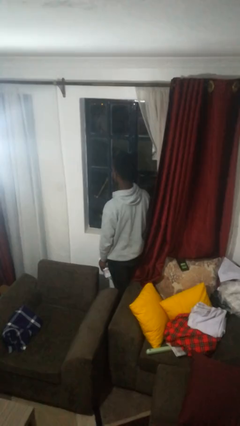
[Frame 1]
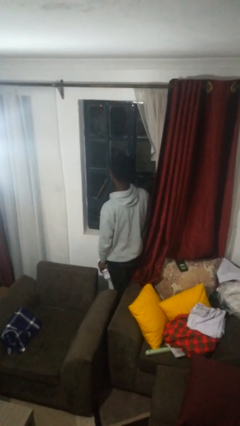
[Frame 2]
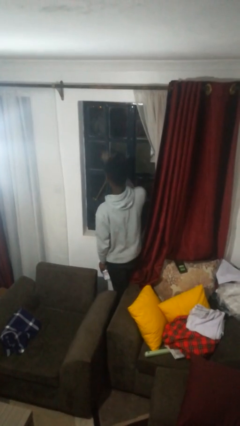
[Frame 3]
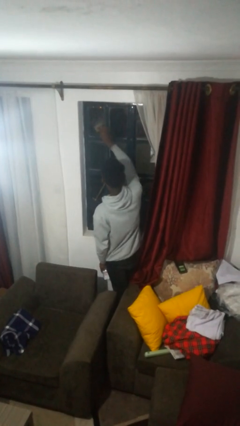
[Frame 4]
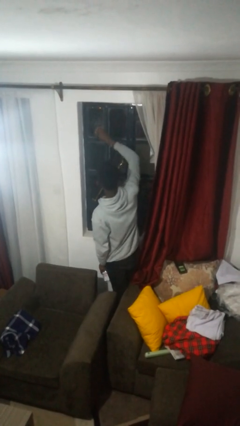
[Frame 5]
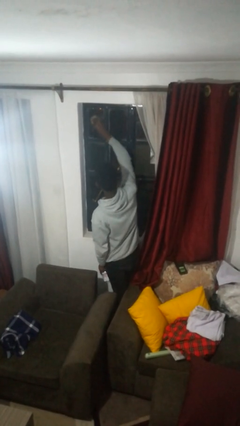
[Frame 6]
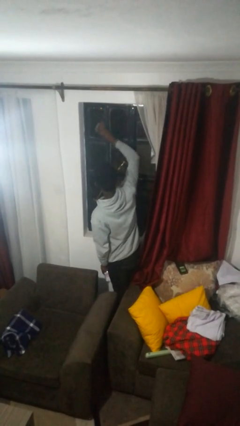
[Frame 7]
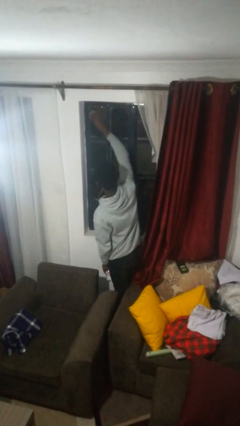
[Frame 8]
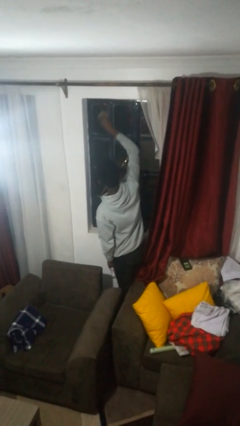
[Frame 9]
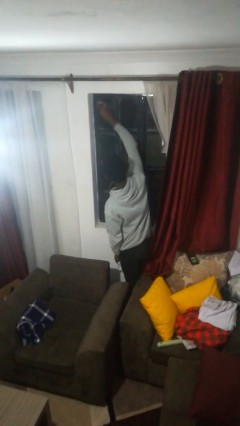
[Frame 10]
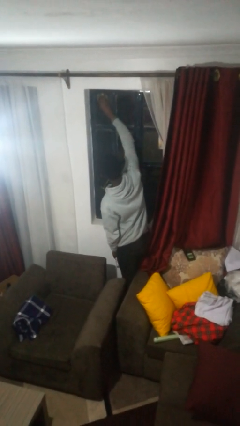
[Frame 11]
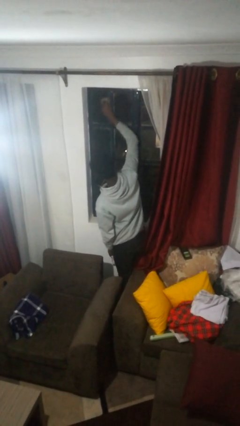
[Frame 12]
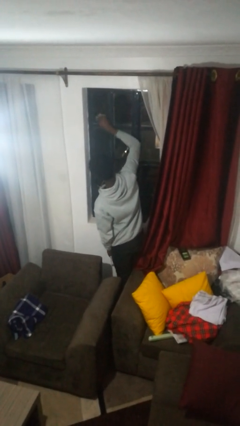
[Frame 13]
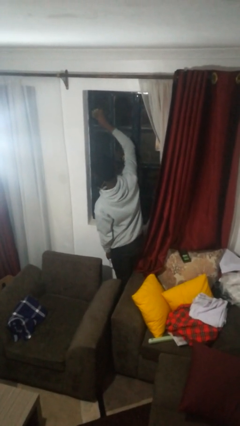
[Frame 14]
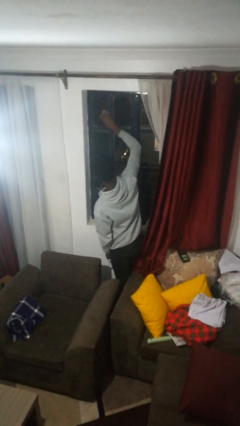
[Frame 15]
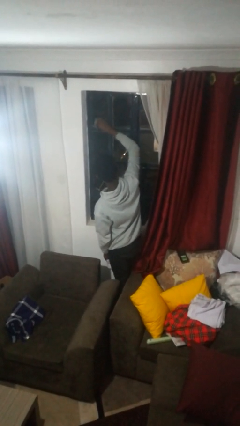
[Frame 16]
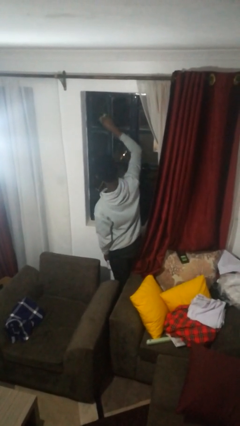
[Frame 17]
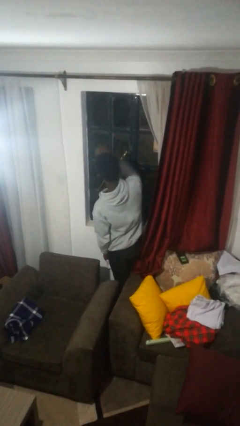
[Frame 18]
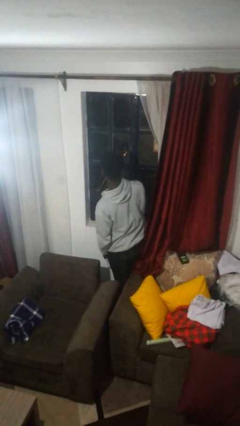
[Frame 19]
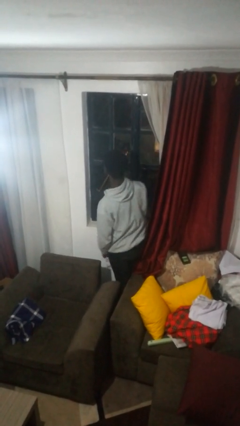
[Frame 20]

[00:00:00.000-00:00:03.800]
person washes window

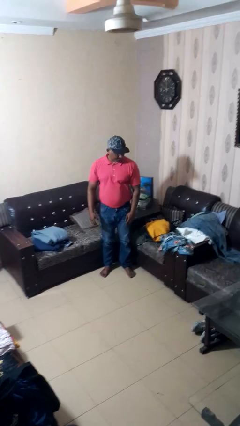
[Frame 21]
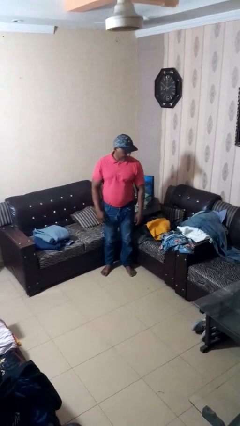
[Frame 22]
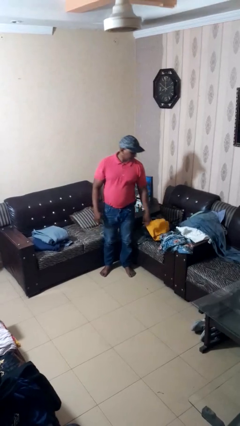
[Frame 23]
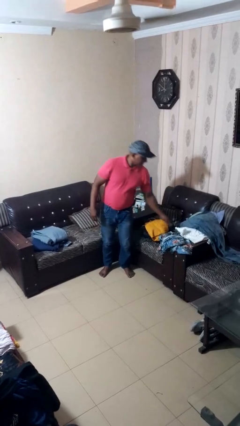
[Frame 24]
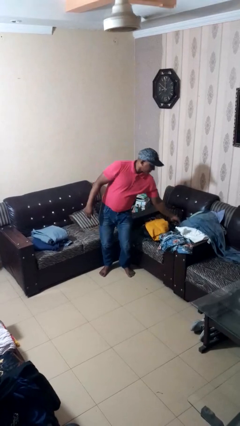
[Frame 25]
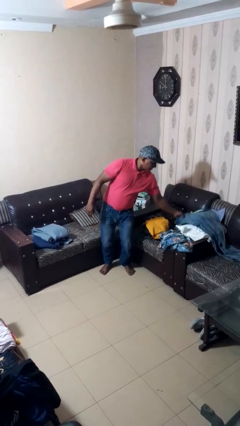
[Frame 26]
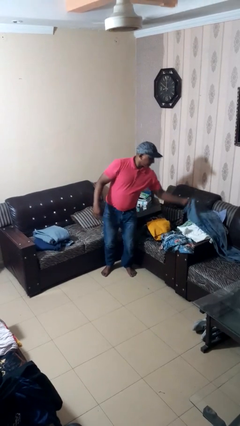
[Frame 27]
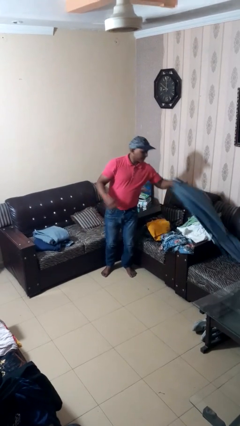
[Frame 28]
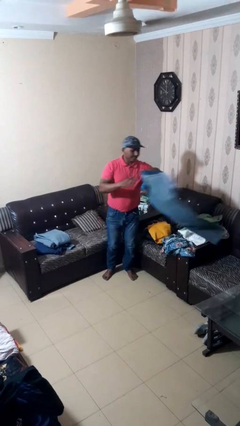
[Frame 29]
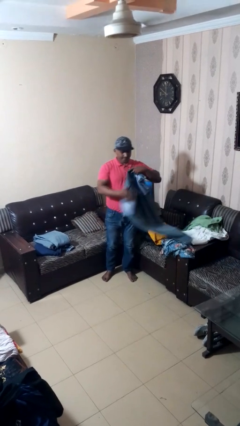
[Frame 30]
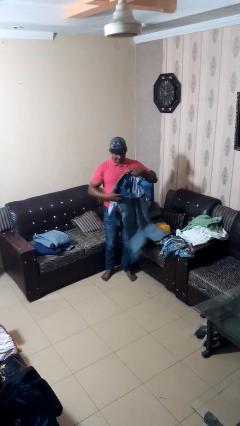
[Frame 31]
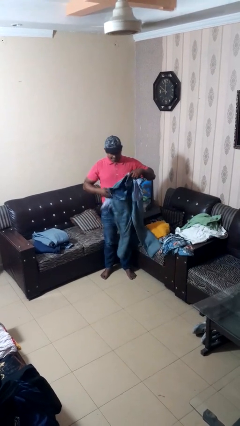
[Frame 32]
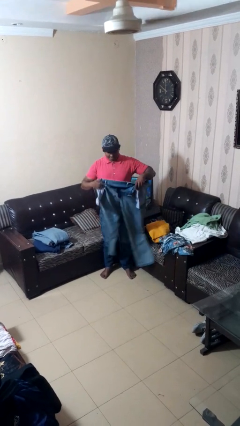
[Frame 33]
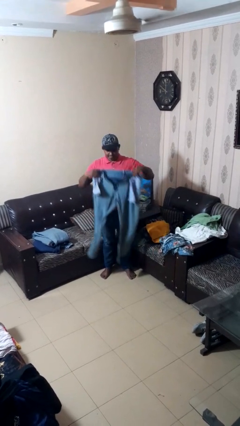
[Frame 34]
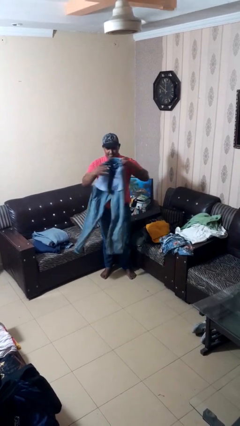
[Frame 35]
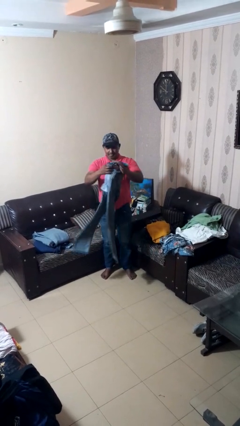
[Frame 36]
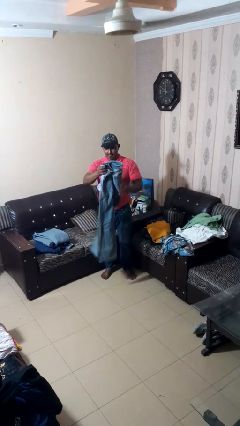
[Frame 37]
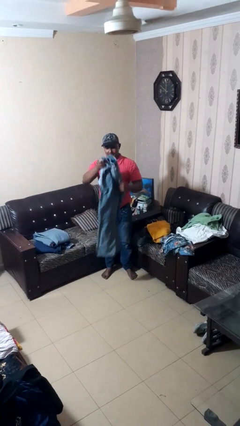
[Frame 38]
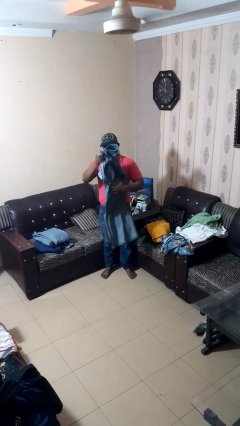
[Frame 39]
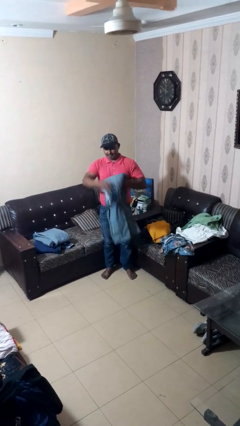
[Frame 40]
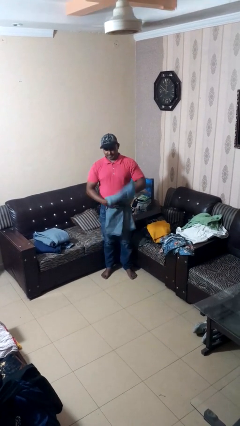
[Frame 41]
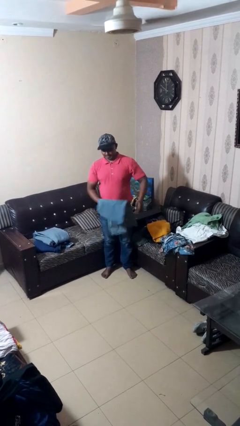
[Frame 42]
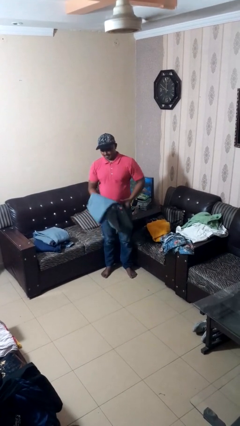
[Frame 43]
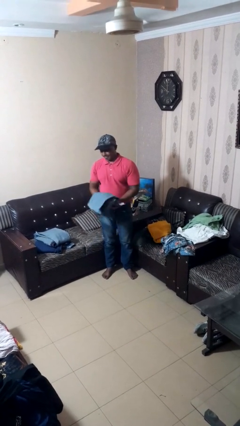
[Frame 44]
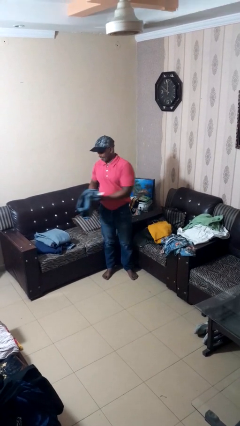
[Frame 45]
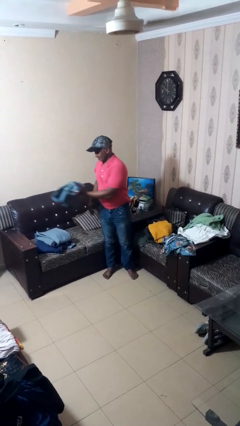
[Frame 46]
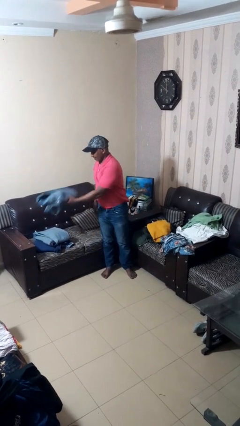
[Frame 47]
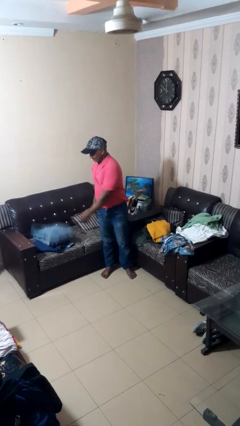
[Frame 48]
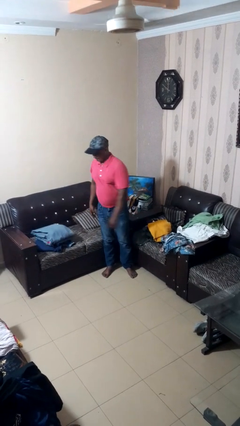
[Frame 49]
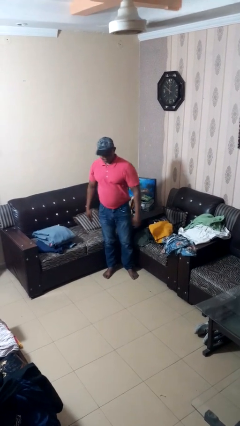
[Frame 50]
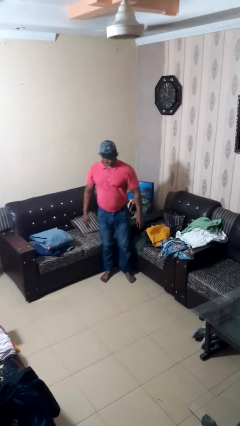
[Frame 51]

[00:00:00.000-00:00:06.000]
person folds pants

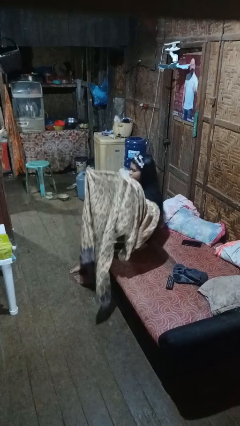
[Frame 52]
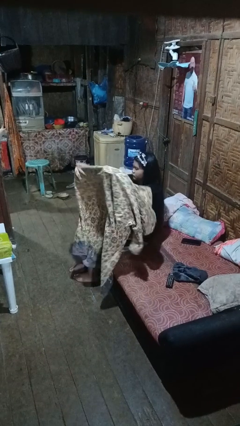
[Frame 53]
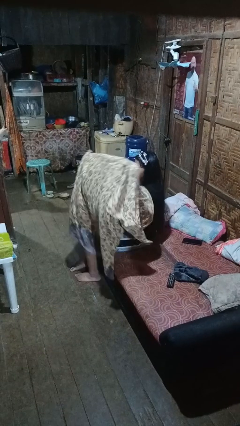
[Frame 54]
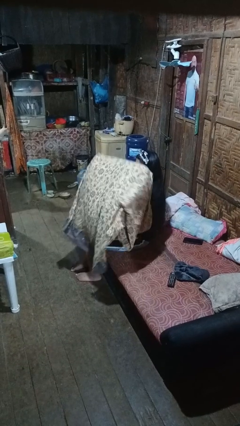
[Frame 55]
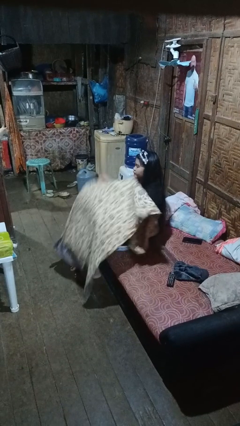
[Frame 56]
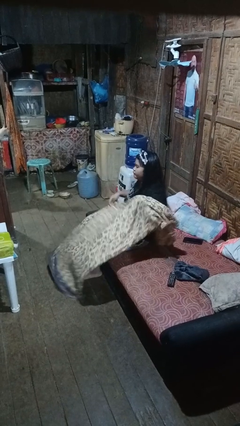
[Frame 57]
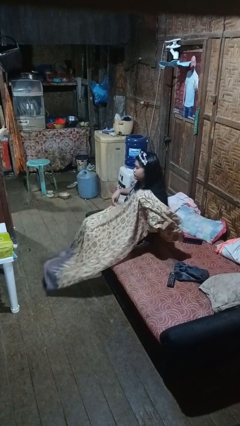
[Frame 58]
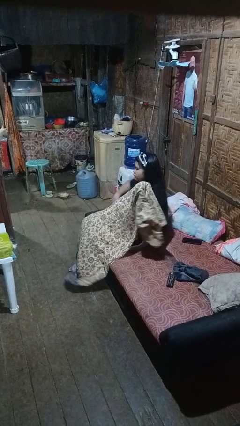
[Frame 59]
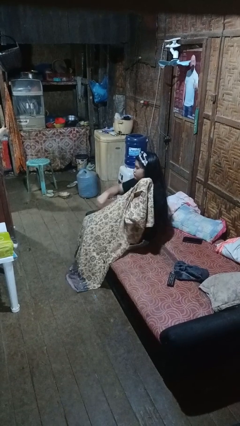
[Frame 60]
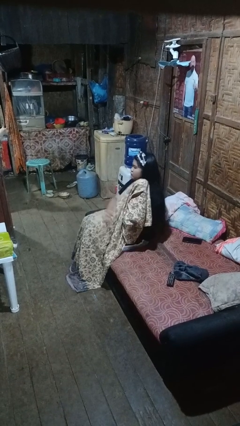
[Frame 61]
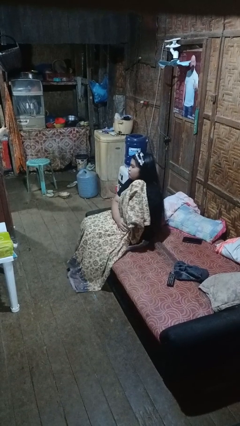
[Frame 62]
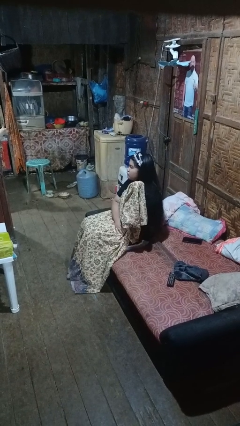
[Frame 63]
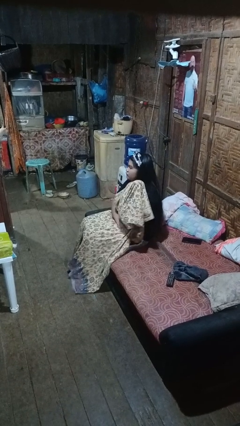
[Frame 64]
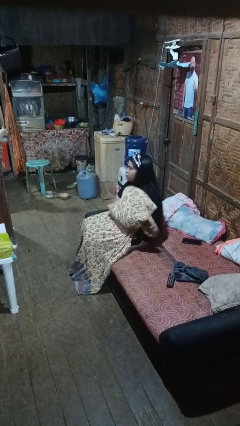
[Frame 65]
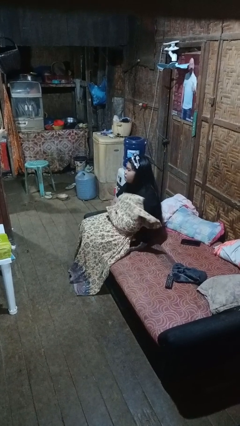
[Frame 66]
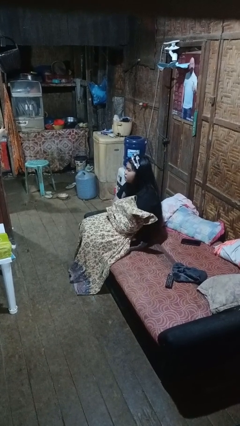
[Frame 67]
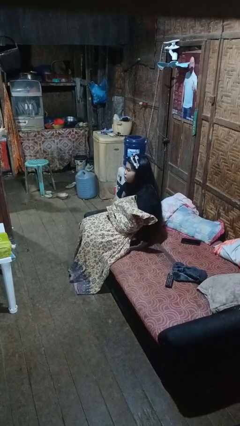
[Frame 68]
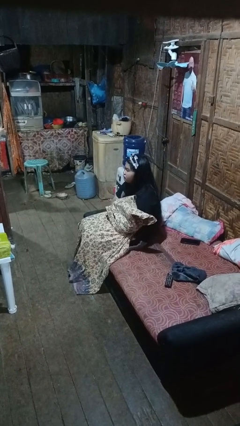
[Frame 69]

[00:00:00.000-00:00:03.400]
person covers with blanket

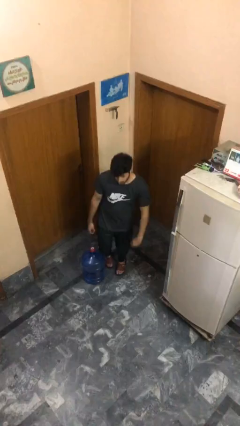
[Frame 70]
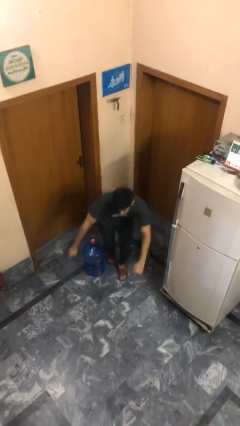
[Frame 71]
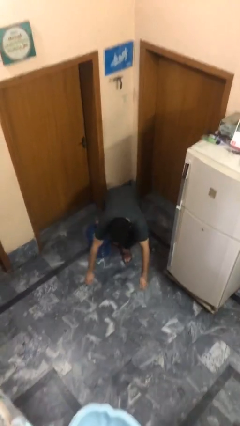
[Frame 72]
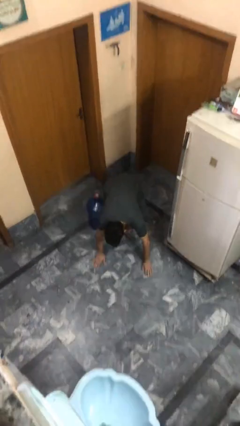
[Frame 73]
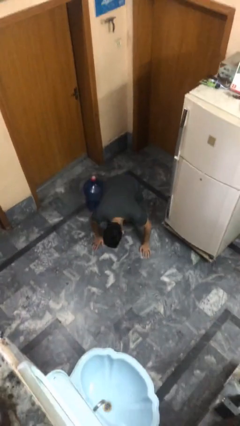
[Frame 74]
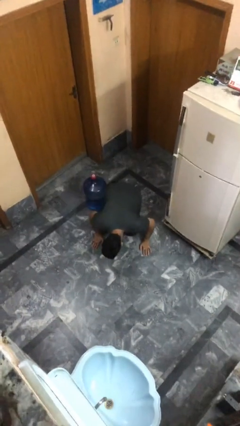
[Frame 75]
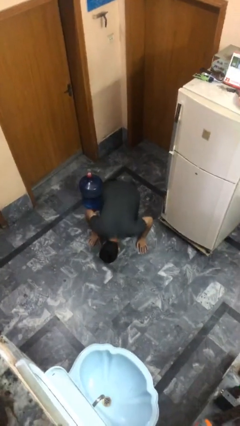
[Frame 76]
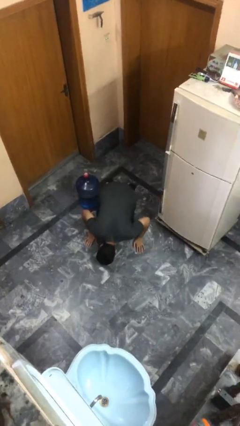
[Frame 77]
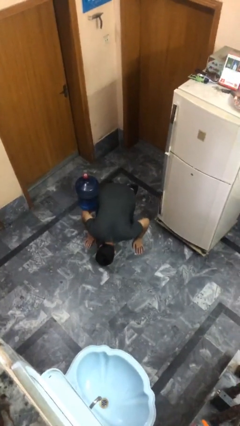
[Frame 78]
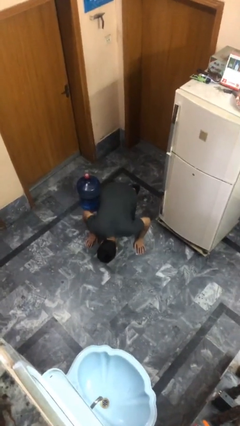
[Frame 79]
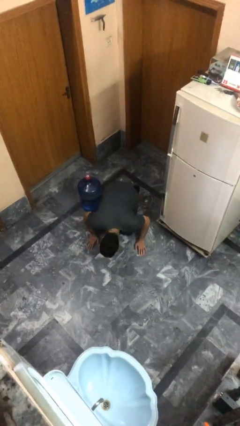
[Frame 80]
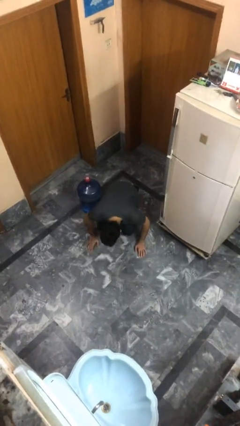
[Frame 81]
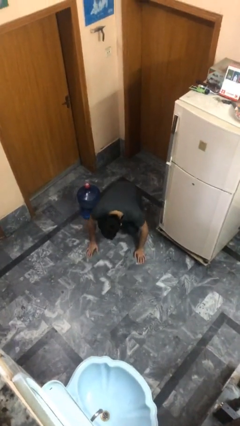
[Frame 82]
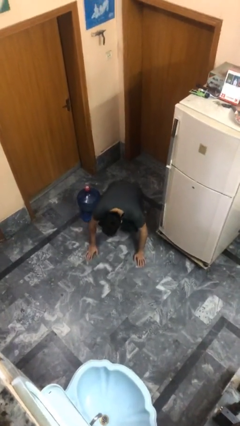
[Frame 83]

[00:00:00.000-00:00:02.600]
person trips on object on floor

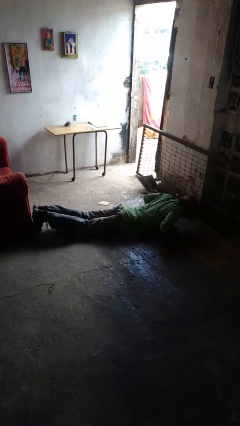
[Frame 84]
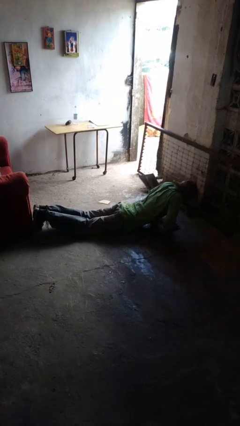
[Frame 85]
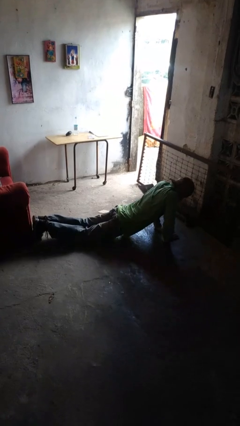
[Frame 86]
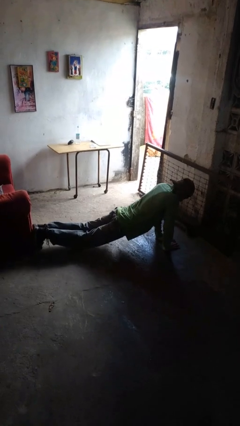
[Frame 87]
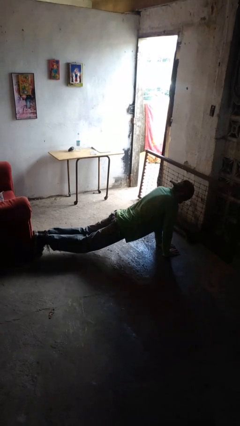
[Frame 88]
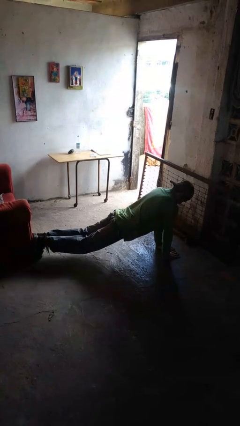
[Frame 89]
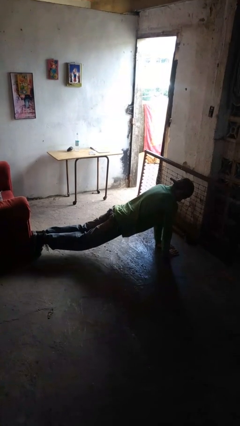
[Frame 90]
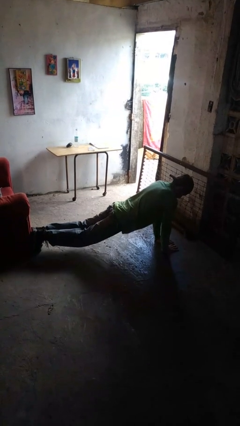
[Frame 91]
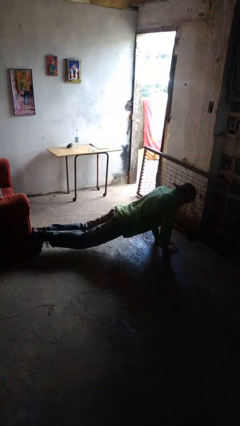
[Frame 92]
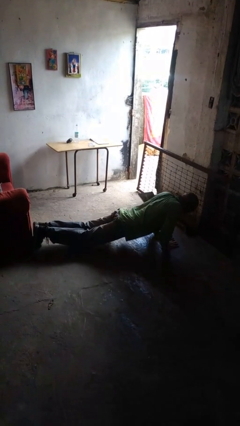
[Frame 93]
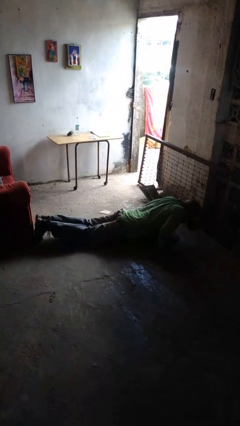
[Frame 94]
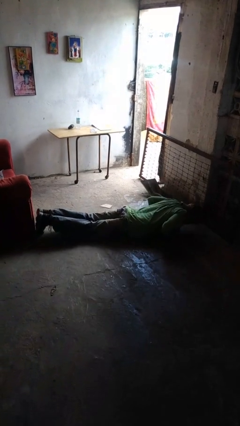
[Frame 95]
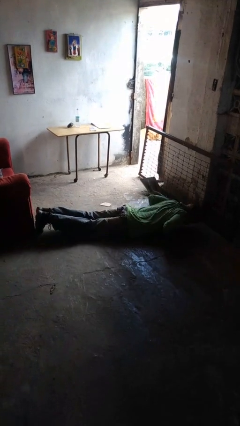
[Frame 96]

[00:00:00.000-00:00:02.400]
person exercises with pushup
